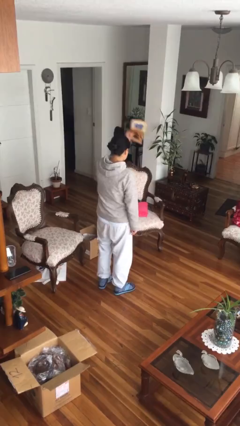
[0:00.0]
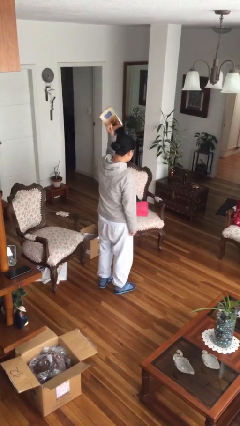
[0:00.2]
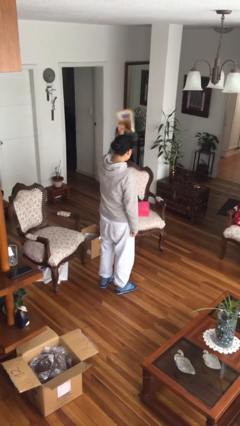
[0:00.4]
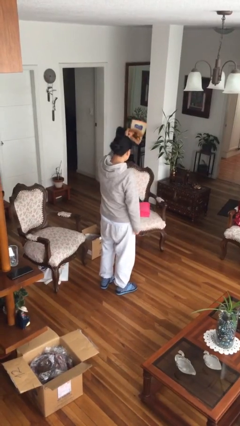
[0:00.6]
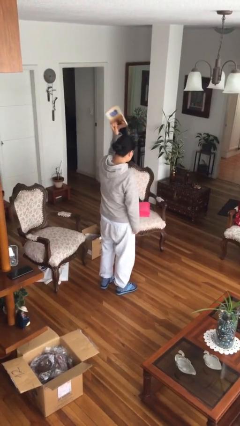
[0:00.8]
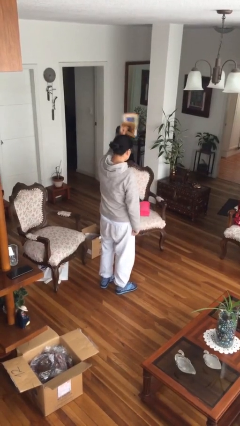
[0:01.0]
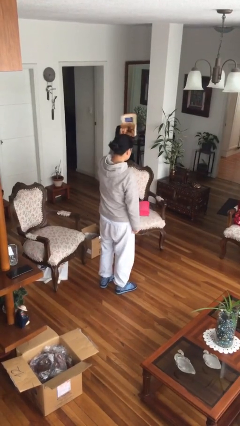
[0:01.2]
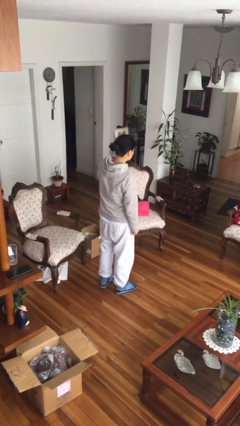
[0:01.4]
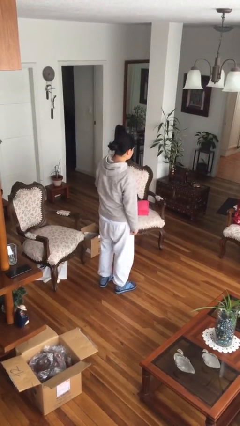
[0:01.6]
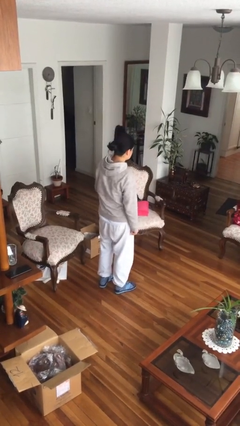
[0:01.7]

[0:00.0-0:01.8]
person holds object above head

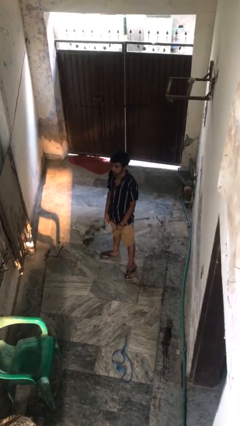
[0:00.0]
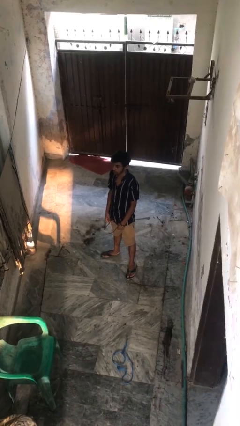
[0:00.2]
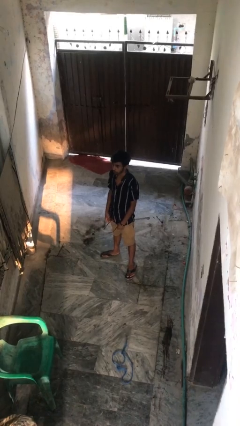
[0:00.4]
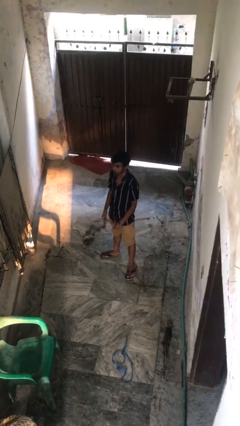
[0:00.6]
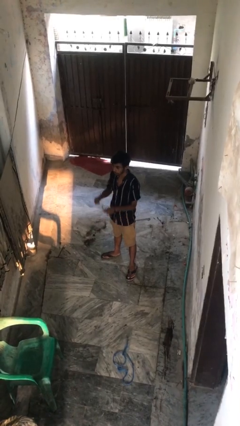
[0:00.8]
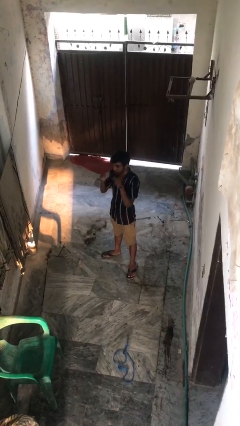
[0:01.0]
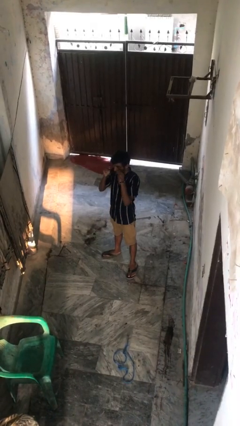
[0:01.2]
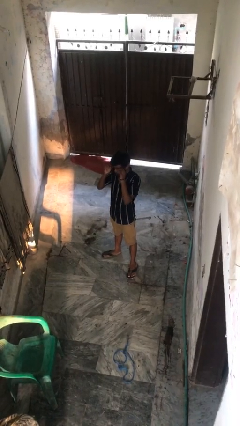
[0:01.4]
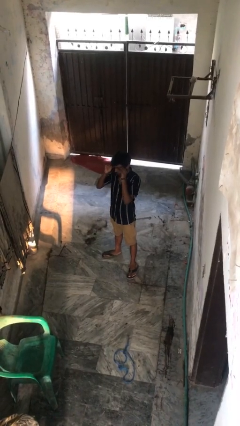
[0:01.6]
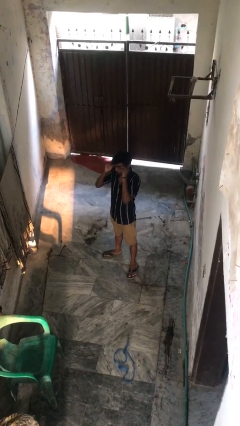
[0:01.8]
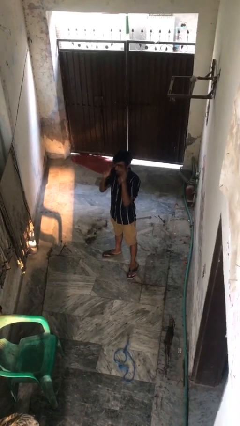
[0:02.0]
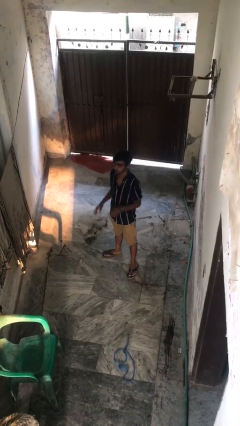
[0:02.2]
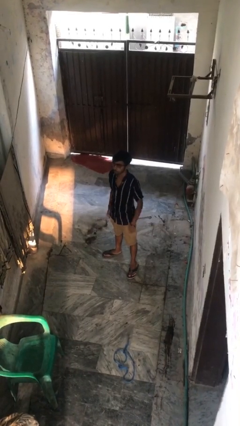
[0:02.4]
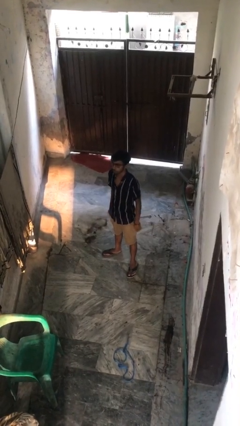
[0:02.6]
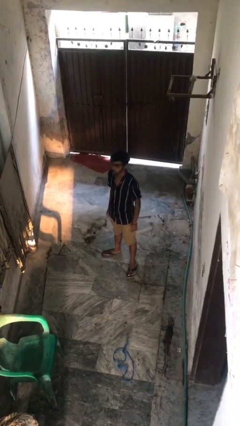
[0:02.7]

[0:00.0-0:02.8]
person puts on glasses

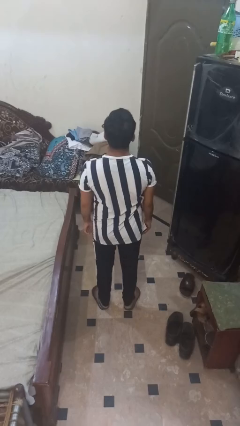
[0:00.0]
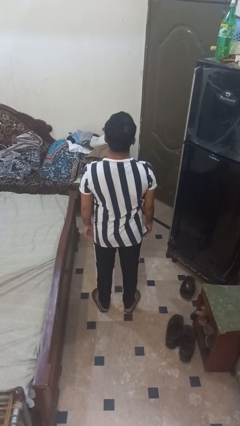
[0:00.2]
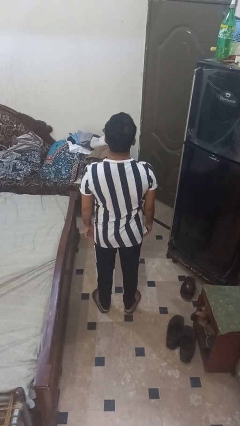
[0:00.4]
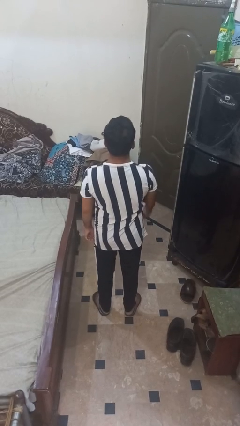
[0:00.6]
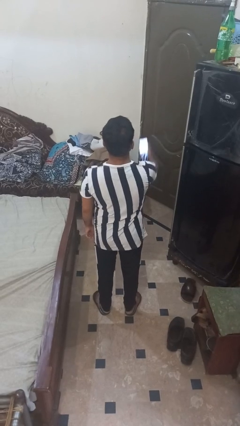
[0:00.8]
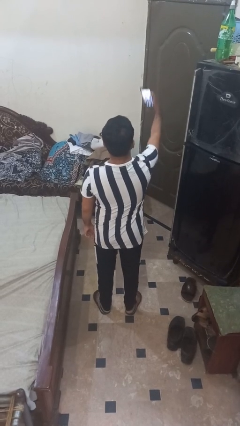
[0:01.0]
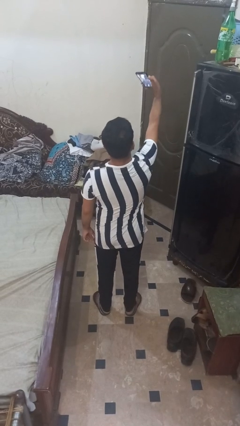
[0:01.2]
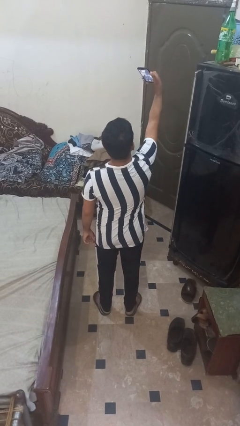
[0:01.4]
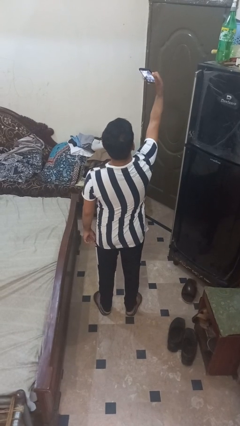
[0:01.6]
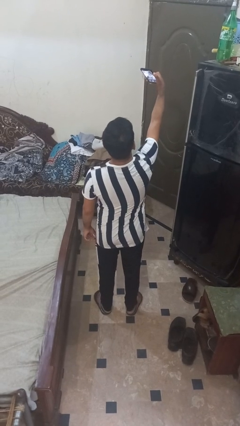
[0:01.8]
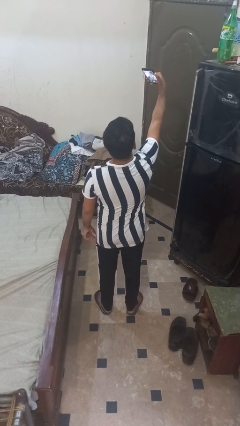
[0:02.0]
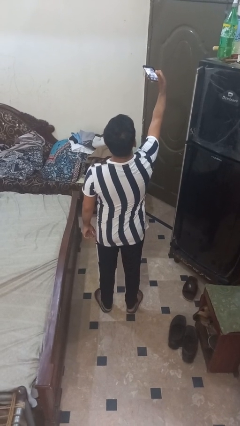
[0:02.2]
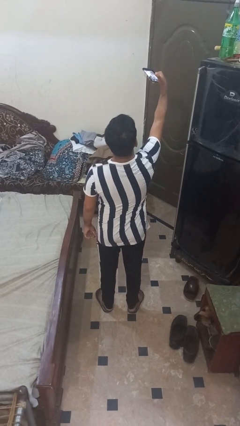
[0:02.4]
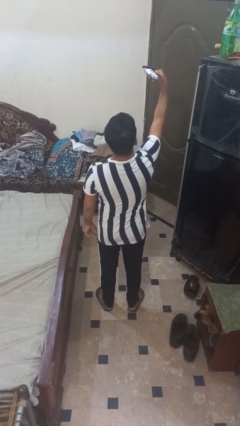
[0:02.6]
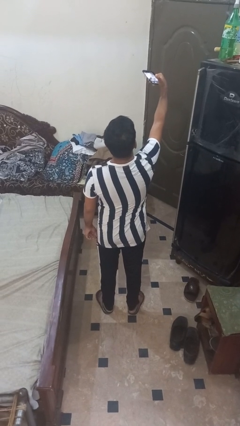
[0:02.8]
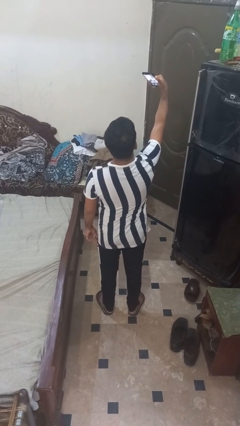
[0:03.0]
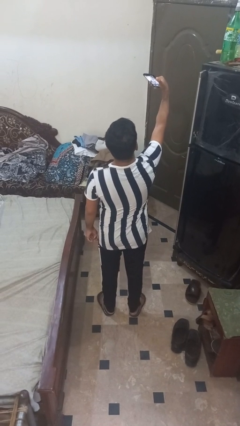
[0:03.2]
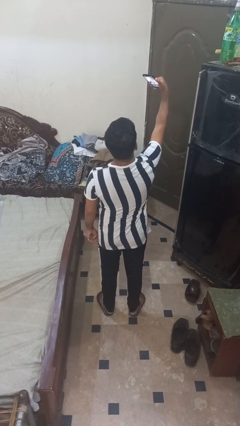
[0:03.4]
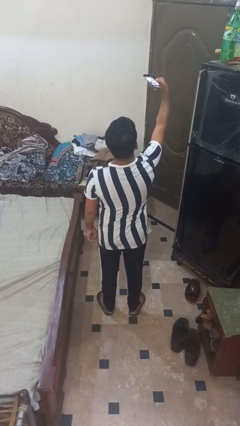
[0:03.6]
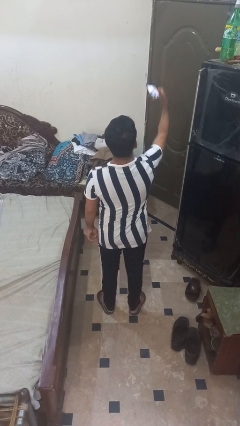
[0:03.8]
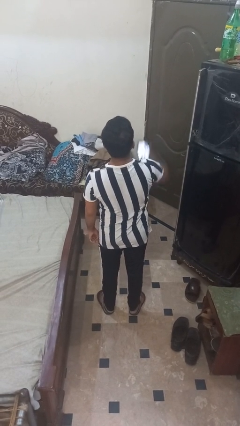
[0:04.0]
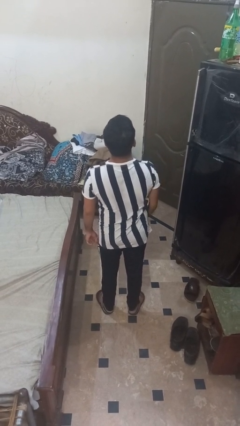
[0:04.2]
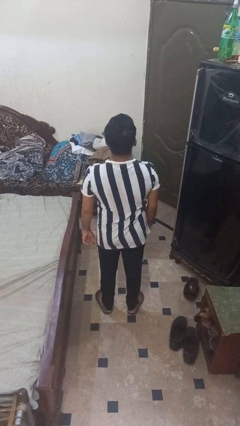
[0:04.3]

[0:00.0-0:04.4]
person takes selfie

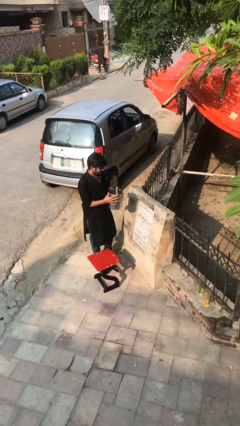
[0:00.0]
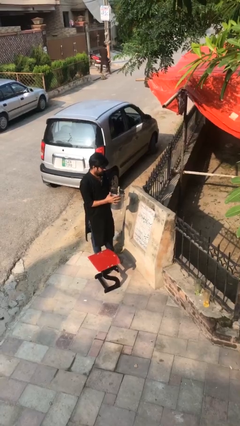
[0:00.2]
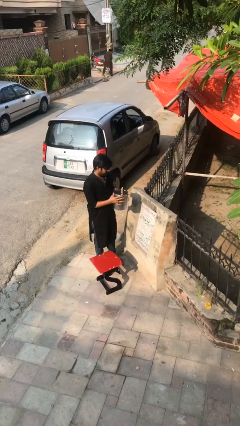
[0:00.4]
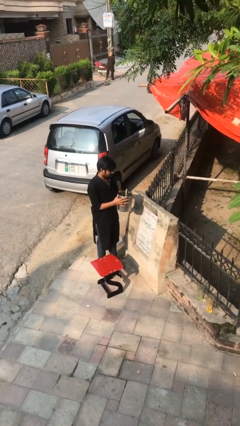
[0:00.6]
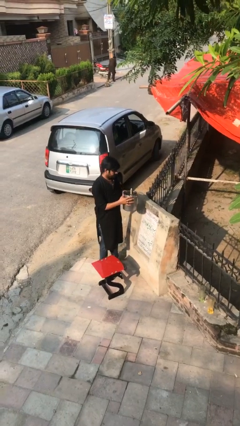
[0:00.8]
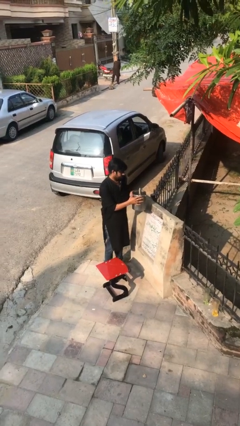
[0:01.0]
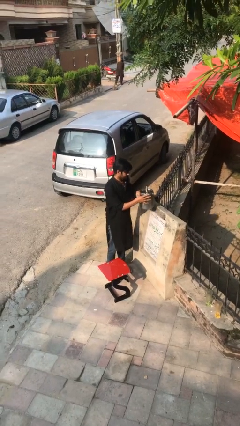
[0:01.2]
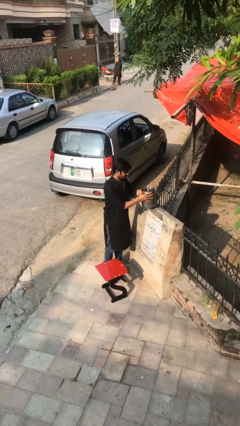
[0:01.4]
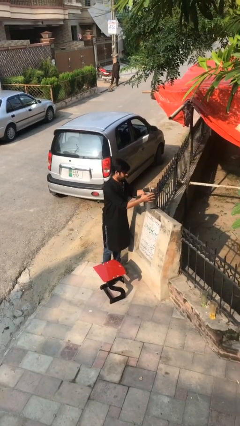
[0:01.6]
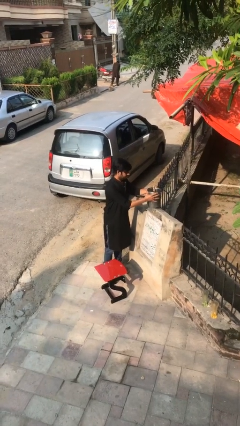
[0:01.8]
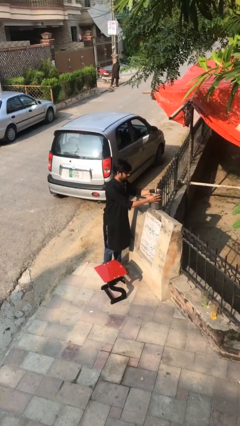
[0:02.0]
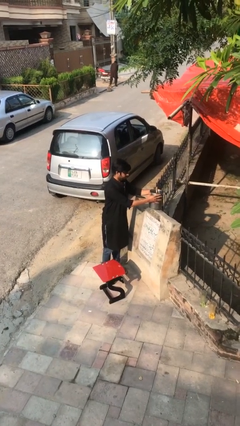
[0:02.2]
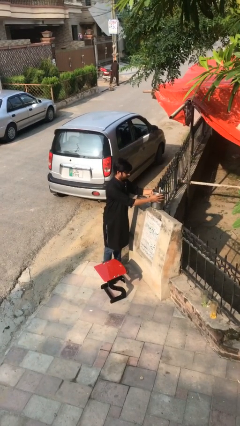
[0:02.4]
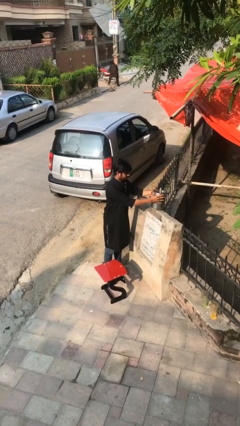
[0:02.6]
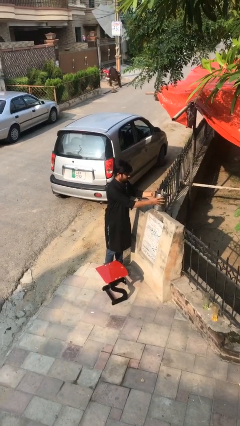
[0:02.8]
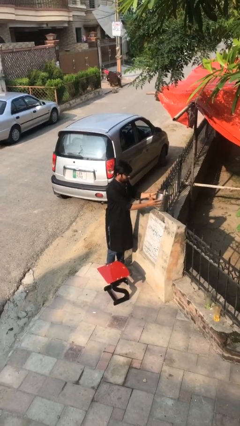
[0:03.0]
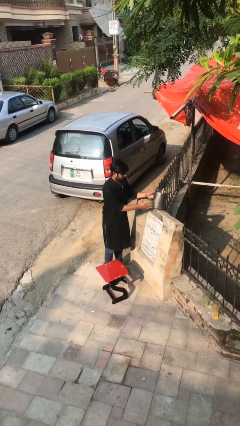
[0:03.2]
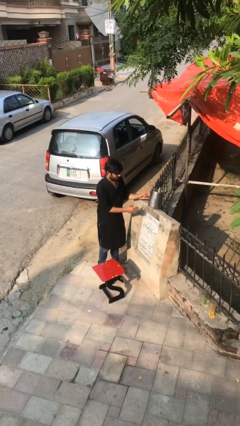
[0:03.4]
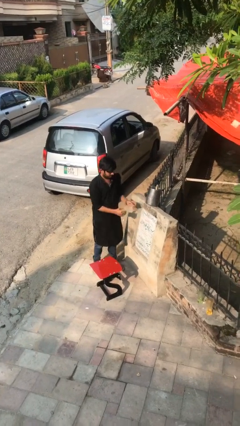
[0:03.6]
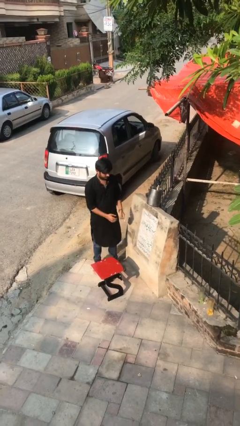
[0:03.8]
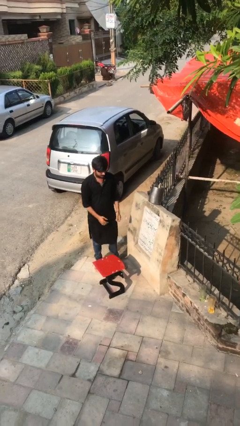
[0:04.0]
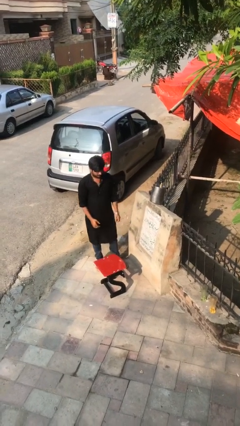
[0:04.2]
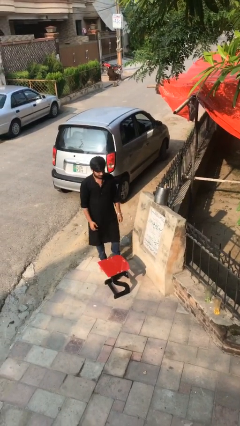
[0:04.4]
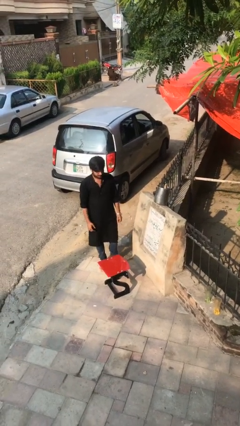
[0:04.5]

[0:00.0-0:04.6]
person puts down object on shelf

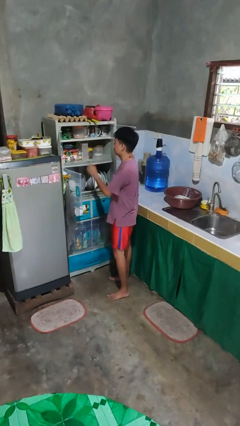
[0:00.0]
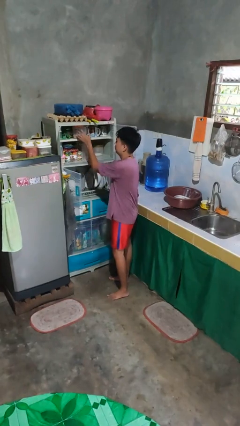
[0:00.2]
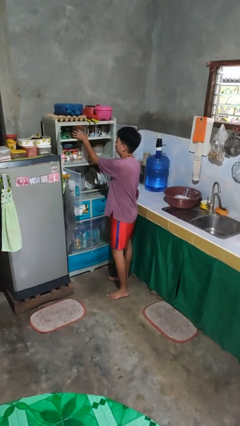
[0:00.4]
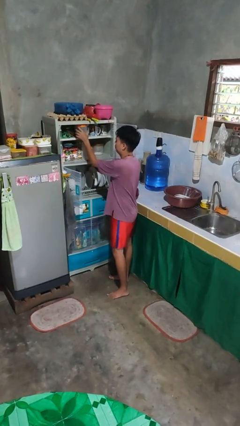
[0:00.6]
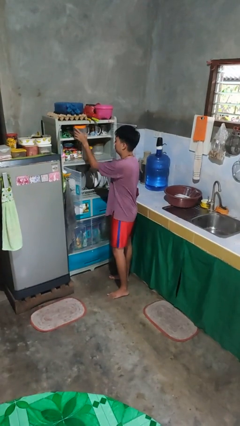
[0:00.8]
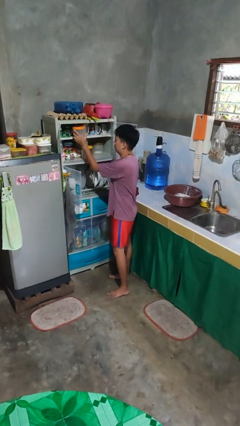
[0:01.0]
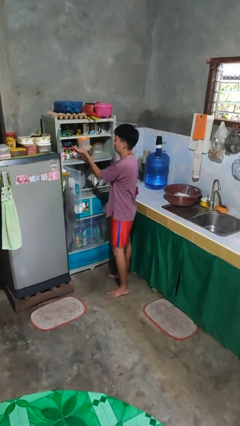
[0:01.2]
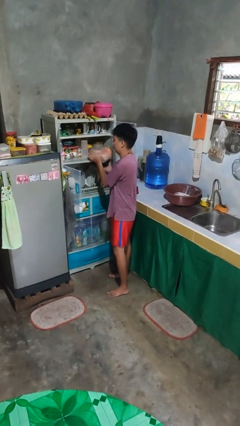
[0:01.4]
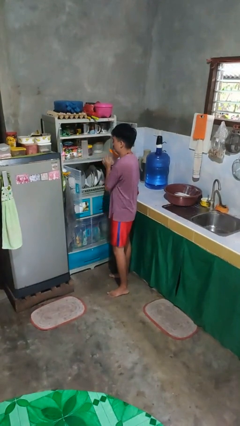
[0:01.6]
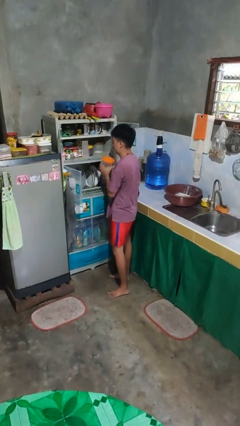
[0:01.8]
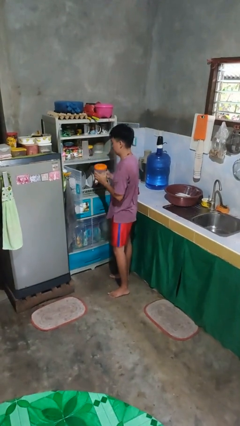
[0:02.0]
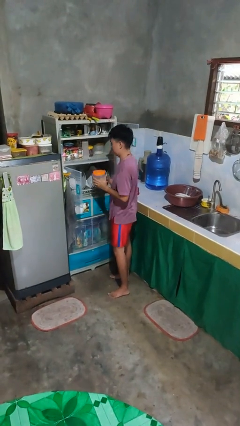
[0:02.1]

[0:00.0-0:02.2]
person takes object from cabinet

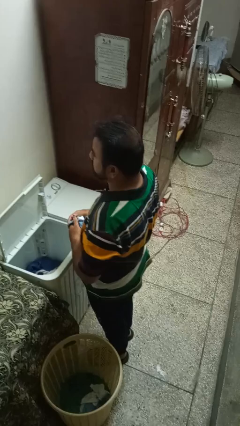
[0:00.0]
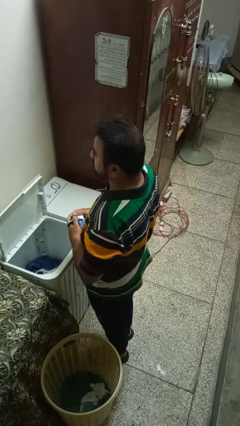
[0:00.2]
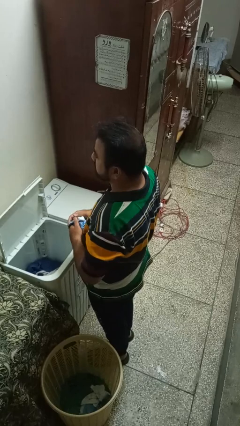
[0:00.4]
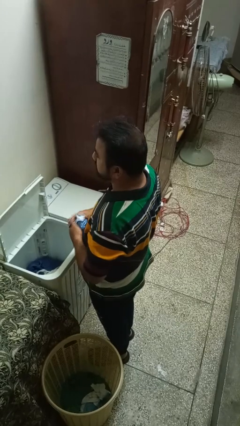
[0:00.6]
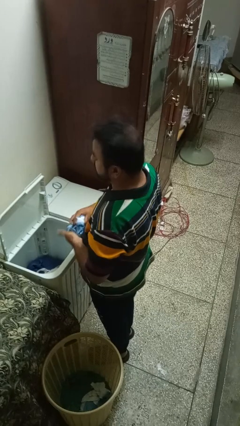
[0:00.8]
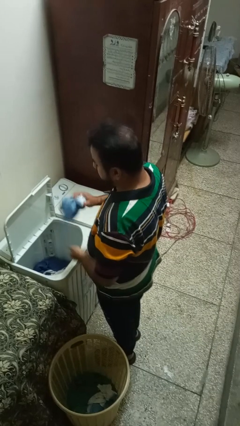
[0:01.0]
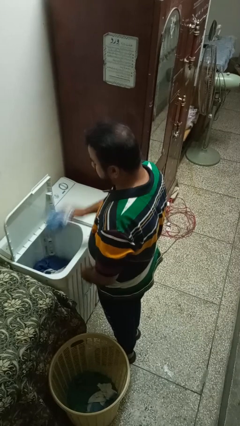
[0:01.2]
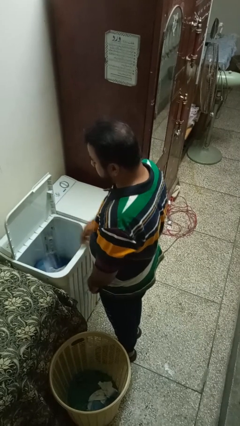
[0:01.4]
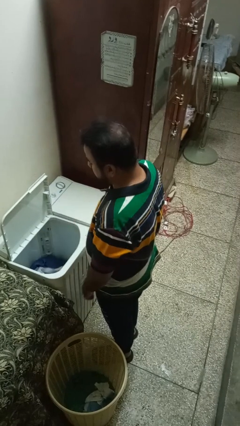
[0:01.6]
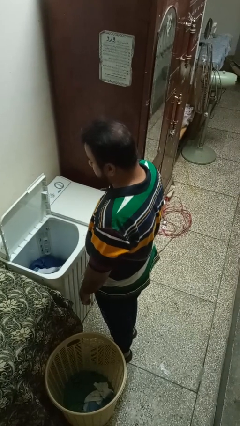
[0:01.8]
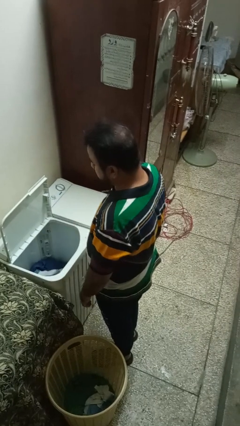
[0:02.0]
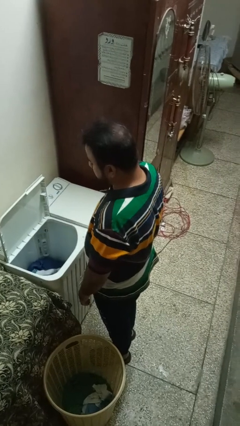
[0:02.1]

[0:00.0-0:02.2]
person loads clotheswasher
